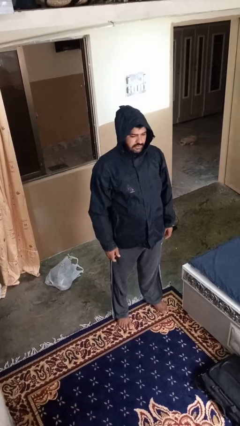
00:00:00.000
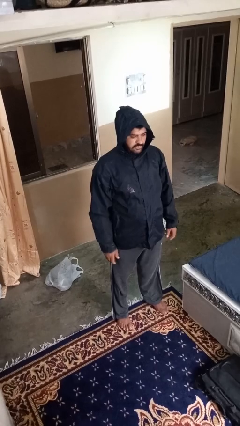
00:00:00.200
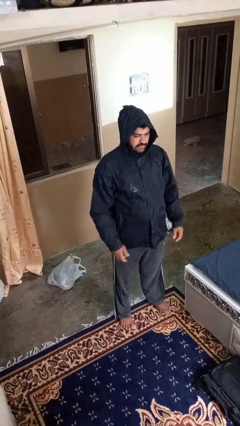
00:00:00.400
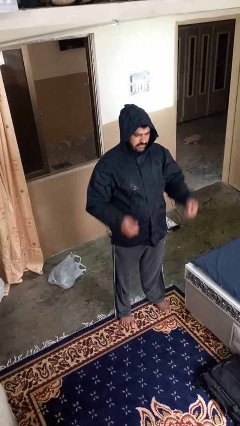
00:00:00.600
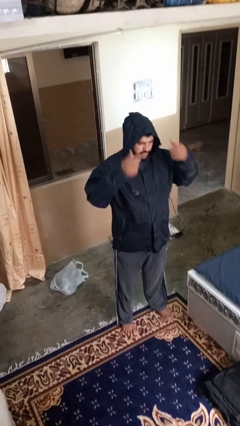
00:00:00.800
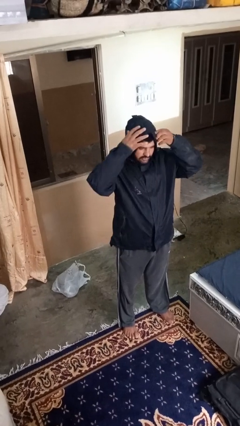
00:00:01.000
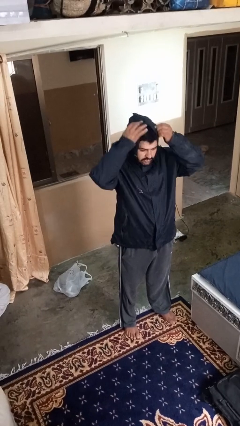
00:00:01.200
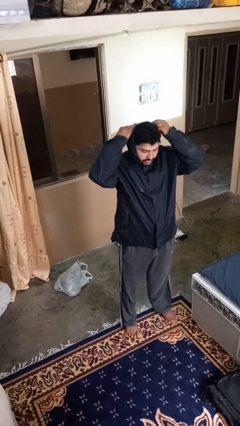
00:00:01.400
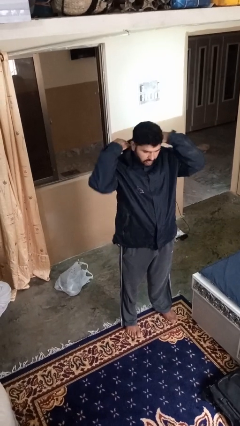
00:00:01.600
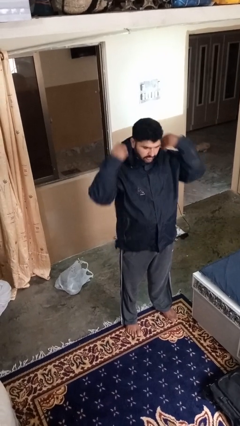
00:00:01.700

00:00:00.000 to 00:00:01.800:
person takes off hoodie

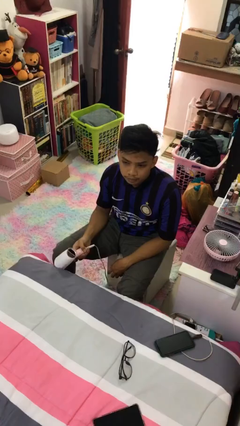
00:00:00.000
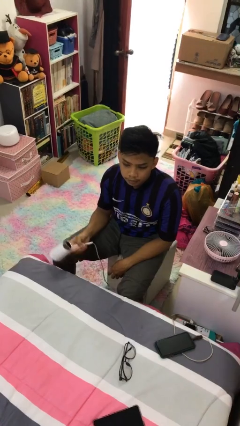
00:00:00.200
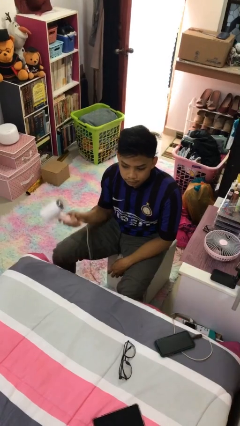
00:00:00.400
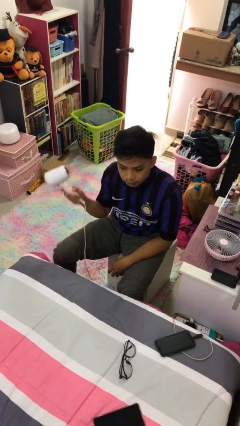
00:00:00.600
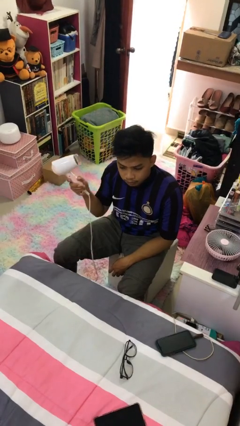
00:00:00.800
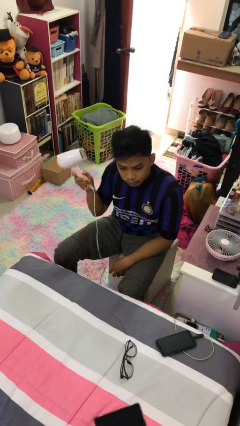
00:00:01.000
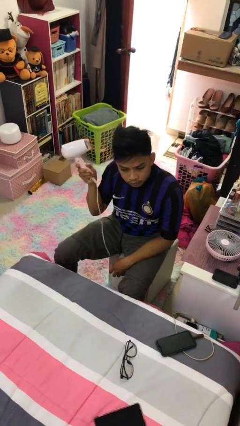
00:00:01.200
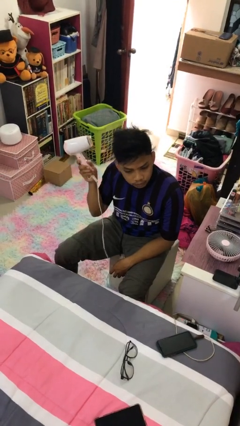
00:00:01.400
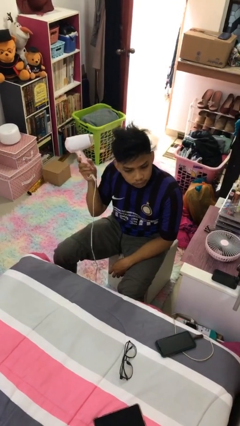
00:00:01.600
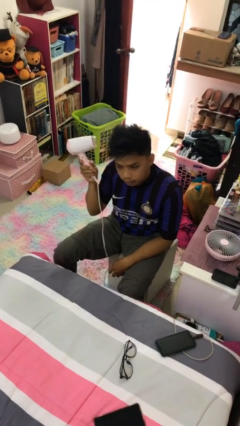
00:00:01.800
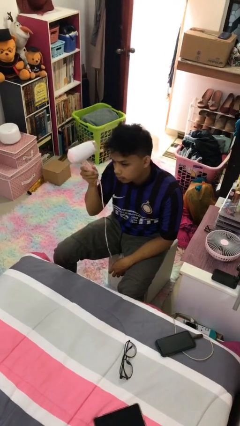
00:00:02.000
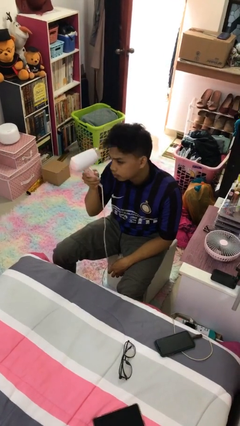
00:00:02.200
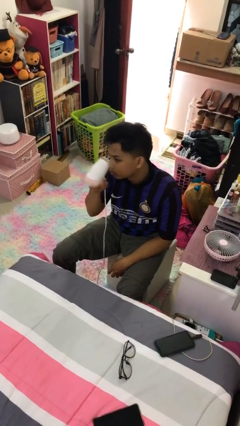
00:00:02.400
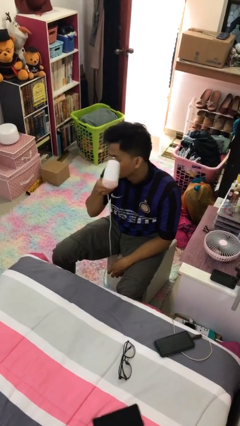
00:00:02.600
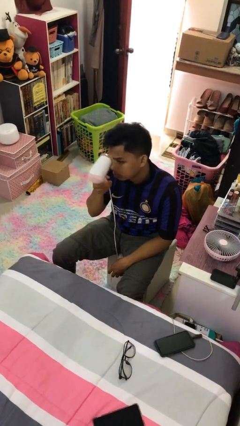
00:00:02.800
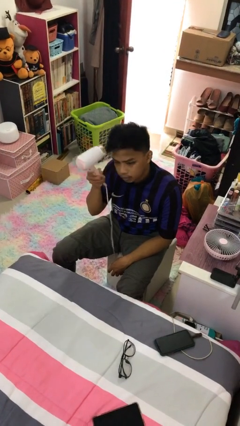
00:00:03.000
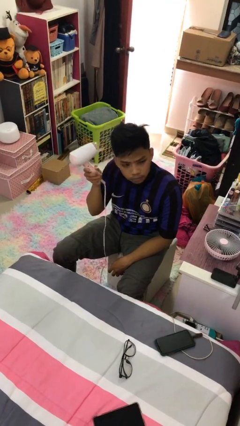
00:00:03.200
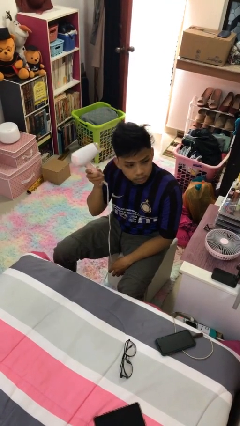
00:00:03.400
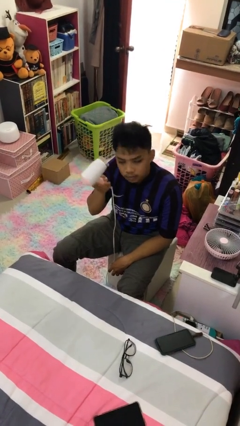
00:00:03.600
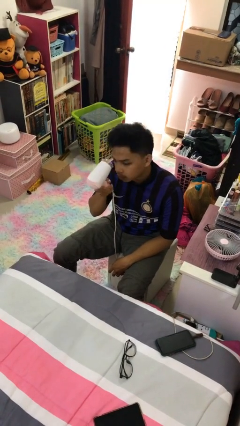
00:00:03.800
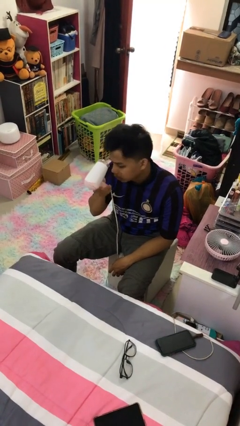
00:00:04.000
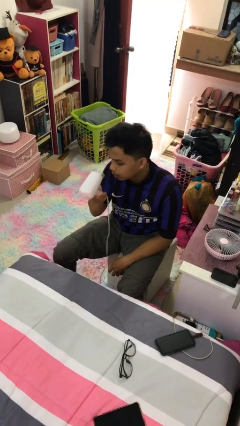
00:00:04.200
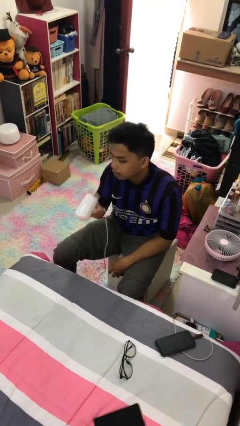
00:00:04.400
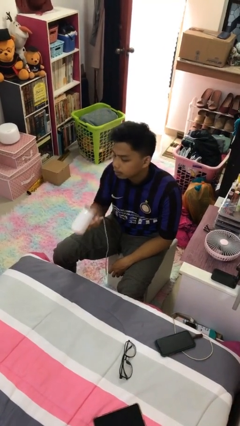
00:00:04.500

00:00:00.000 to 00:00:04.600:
person dries hair with hairdryer

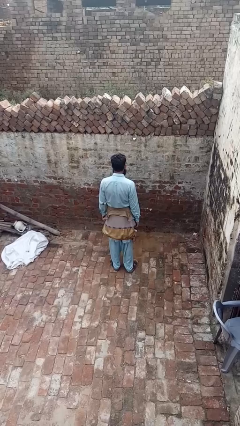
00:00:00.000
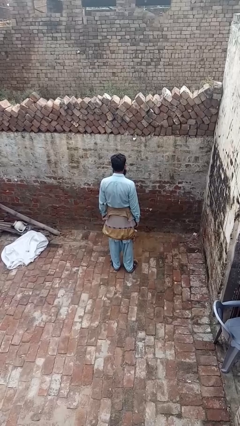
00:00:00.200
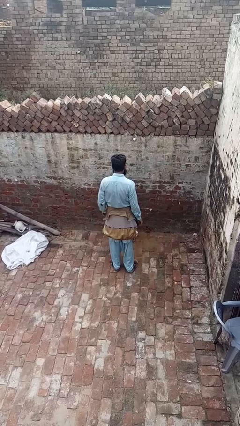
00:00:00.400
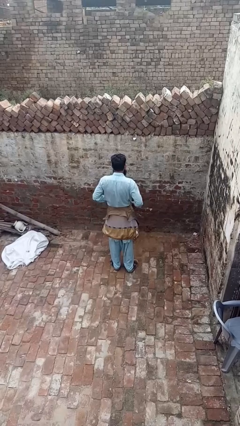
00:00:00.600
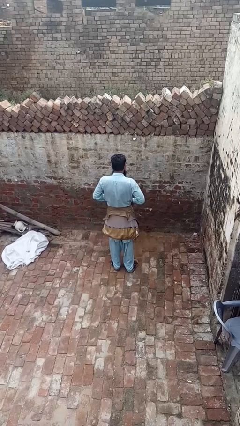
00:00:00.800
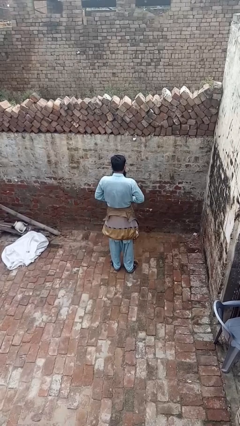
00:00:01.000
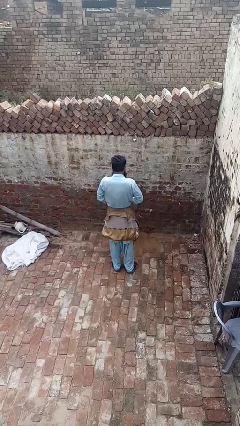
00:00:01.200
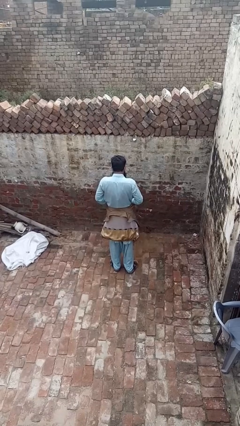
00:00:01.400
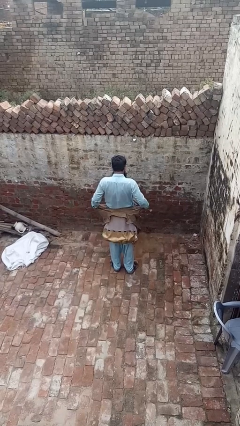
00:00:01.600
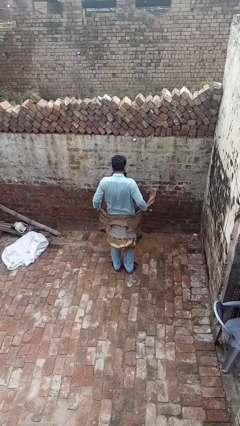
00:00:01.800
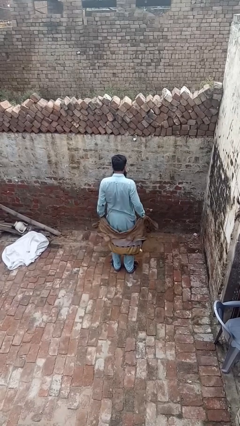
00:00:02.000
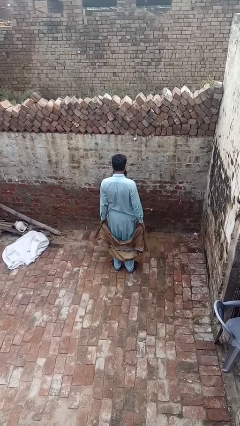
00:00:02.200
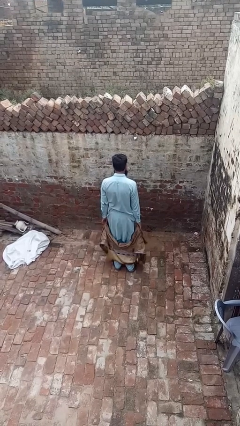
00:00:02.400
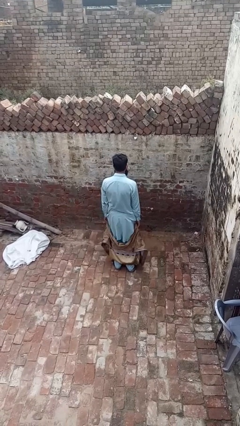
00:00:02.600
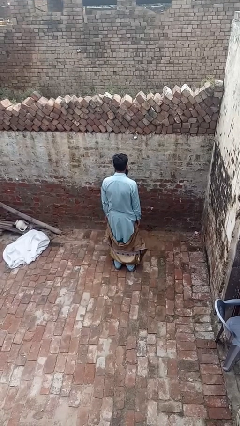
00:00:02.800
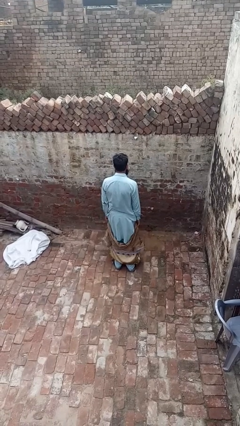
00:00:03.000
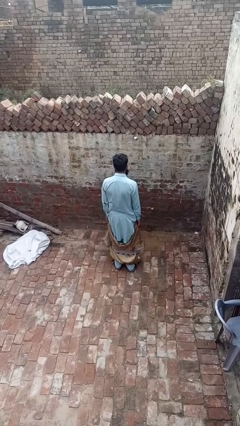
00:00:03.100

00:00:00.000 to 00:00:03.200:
person unties jacket around waist

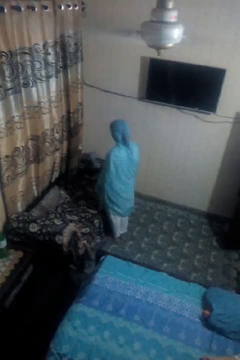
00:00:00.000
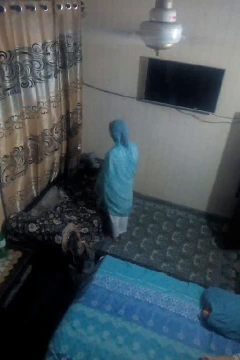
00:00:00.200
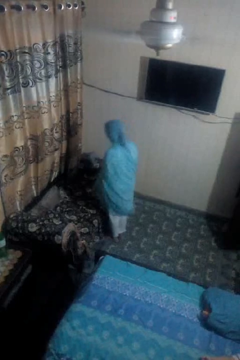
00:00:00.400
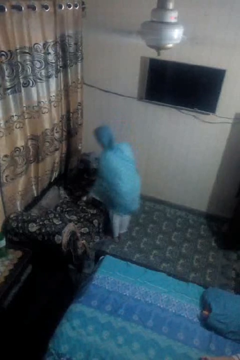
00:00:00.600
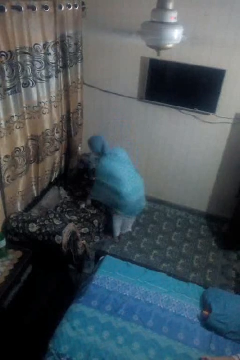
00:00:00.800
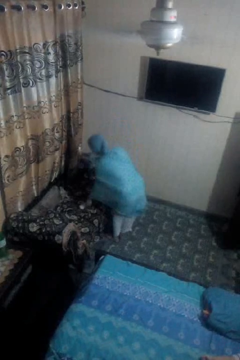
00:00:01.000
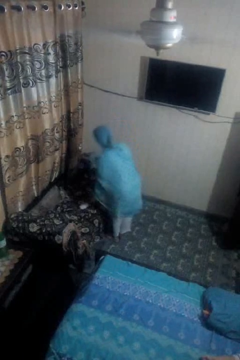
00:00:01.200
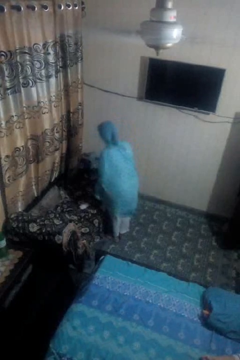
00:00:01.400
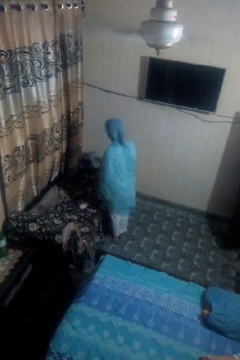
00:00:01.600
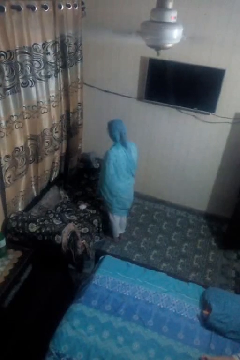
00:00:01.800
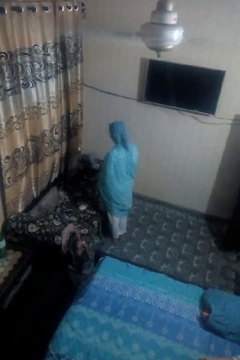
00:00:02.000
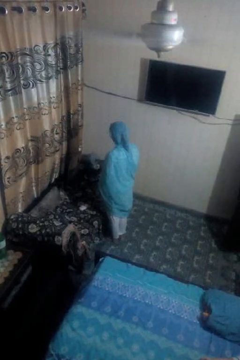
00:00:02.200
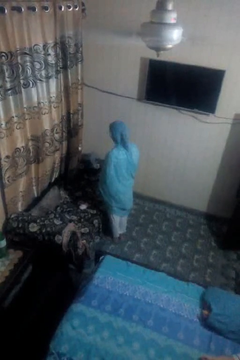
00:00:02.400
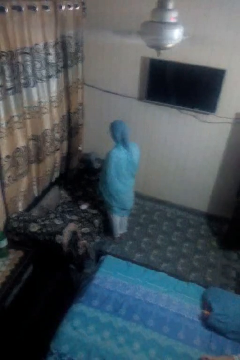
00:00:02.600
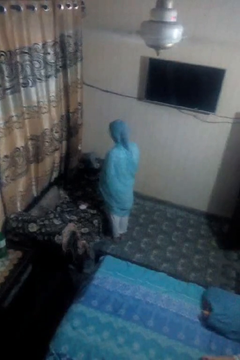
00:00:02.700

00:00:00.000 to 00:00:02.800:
person puts down object on couch

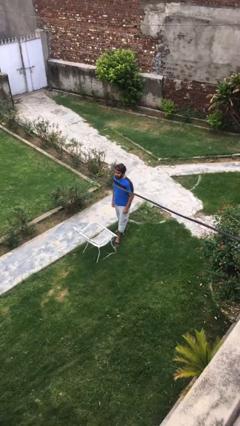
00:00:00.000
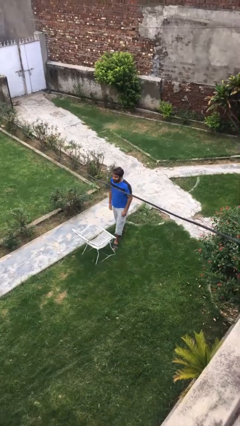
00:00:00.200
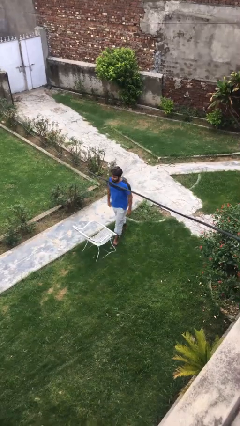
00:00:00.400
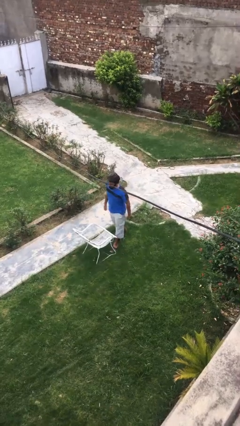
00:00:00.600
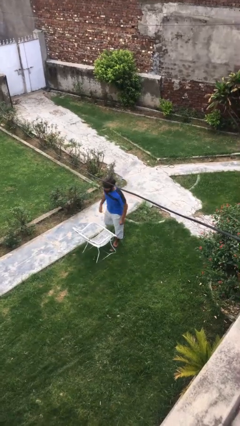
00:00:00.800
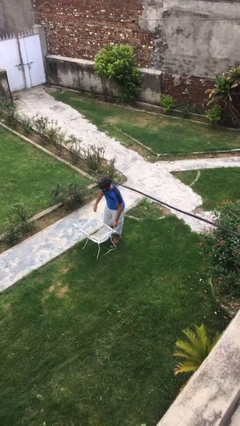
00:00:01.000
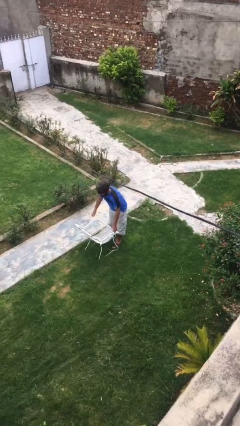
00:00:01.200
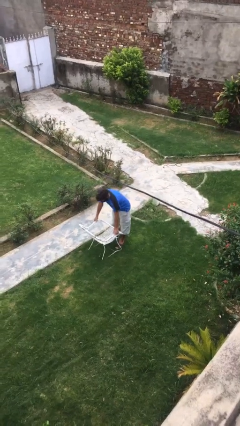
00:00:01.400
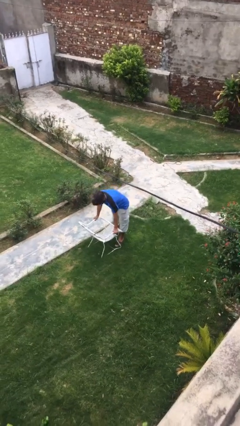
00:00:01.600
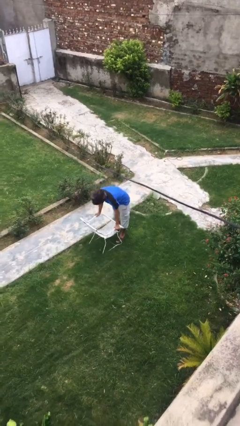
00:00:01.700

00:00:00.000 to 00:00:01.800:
person picks up object from floor

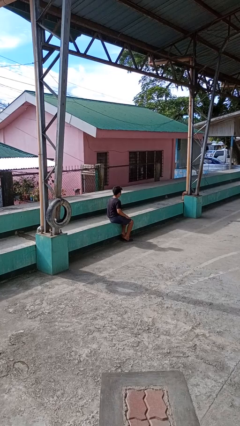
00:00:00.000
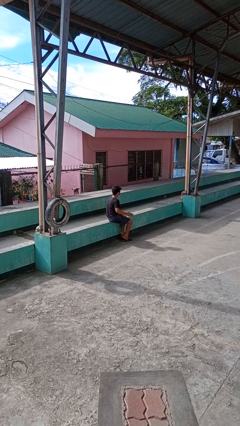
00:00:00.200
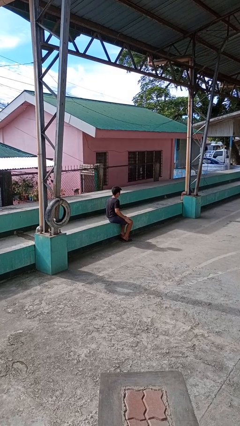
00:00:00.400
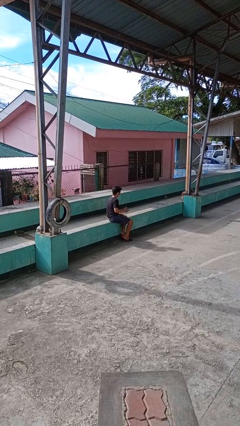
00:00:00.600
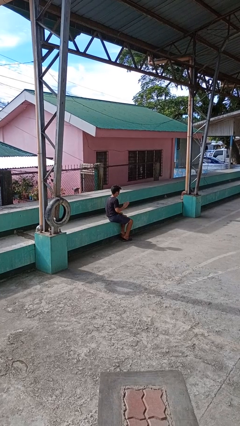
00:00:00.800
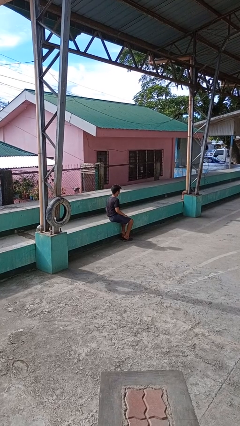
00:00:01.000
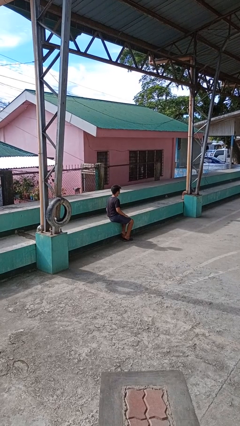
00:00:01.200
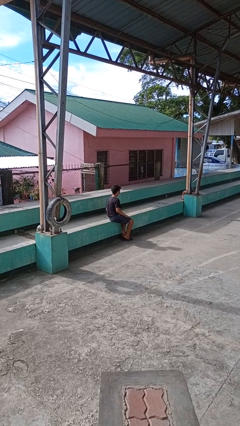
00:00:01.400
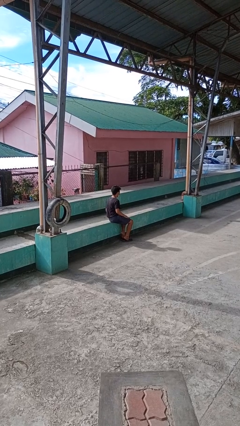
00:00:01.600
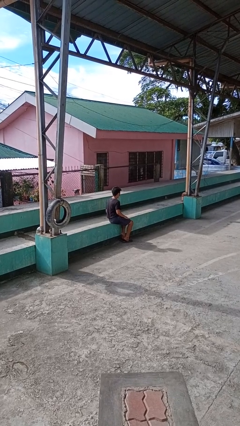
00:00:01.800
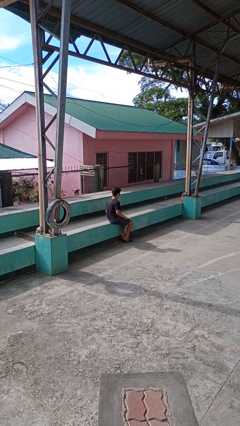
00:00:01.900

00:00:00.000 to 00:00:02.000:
person slaps hands on thighs

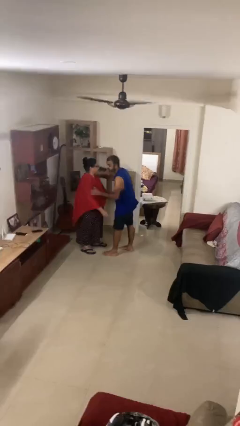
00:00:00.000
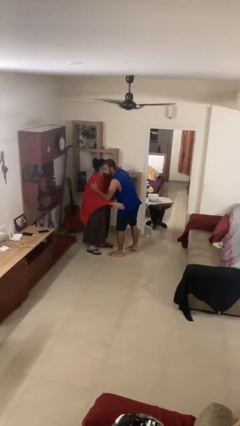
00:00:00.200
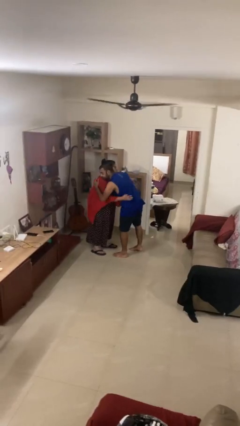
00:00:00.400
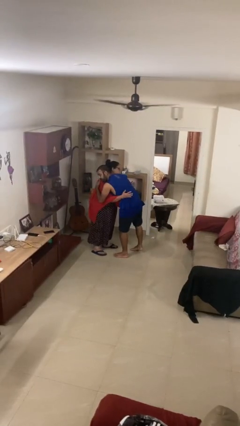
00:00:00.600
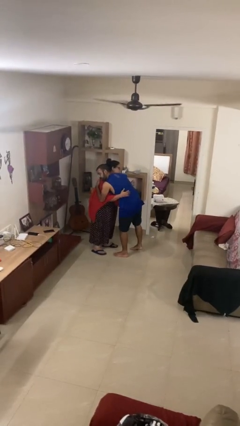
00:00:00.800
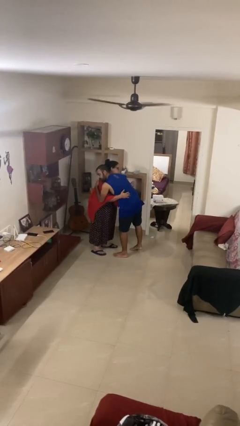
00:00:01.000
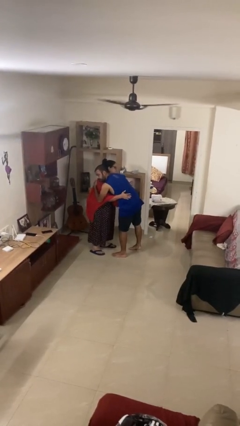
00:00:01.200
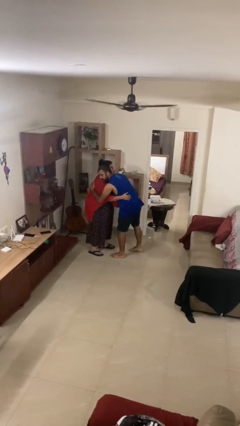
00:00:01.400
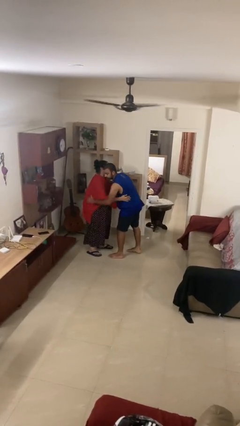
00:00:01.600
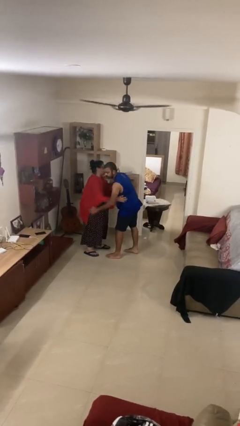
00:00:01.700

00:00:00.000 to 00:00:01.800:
person embraces person
